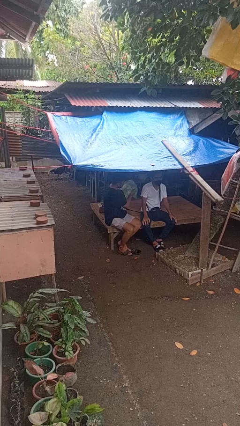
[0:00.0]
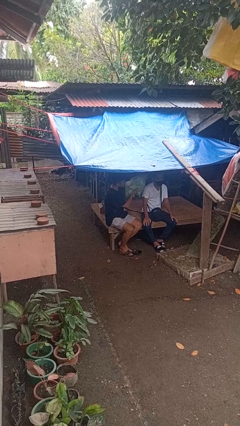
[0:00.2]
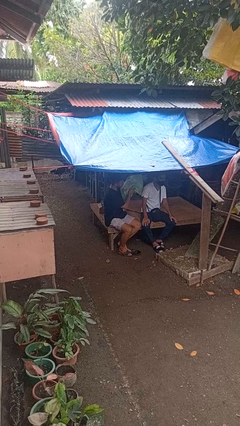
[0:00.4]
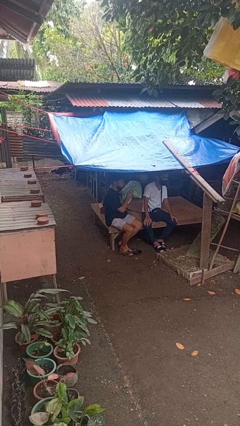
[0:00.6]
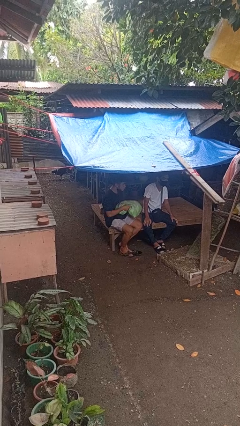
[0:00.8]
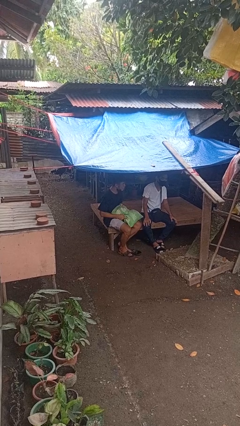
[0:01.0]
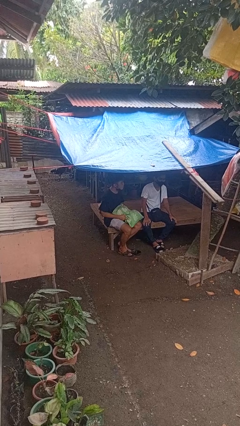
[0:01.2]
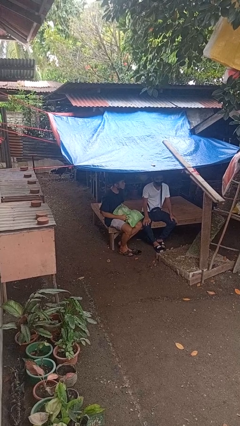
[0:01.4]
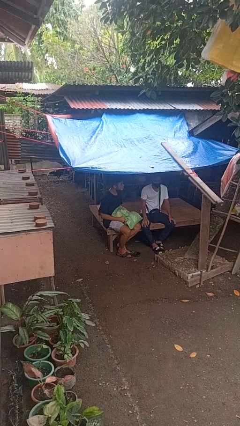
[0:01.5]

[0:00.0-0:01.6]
person hits person with pillow

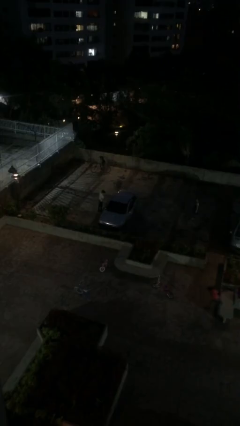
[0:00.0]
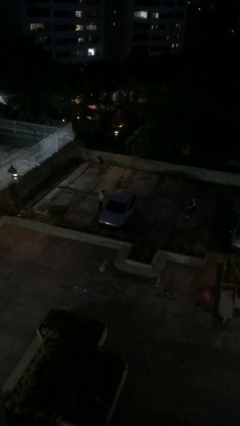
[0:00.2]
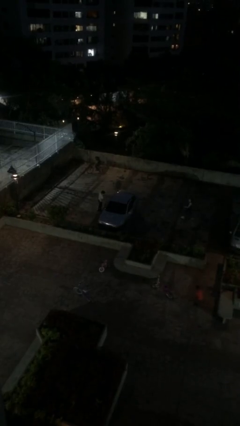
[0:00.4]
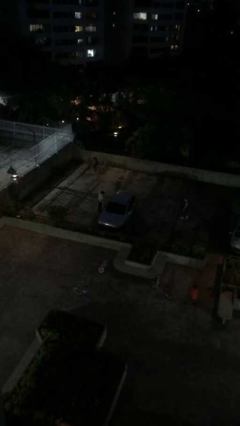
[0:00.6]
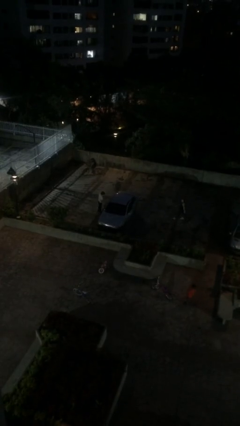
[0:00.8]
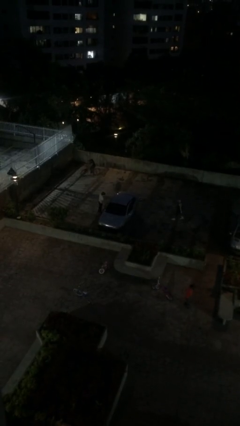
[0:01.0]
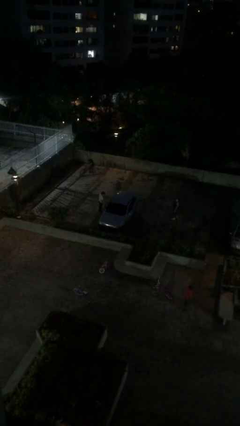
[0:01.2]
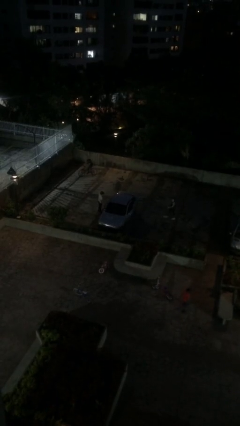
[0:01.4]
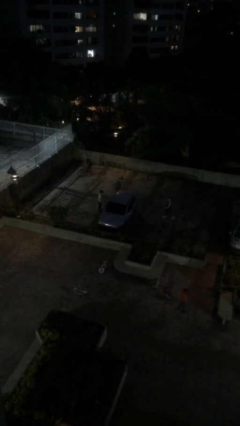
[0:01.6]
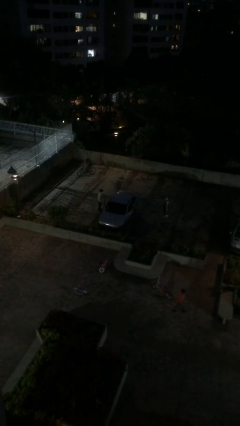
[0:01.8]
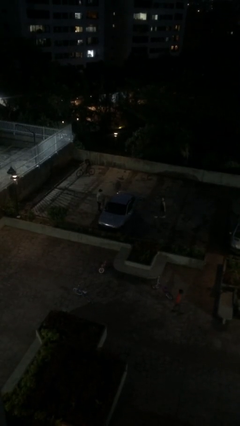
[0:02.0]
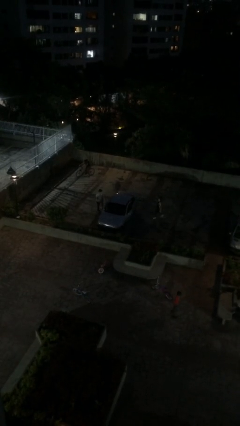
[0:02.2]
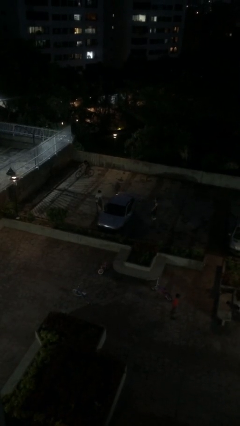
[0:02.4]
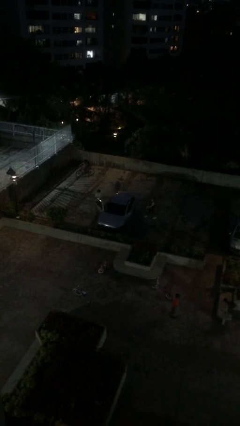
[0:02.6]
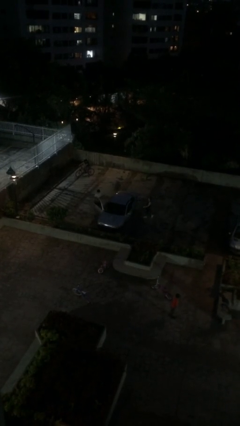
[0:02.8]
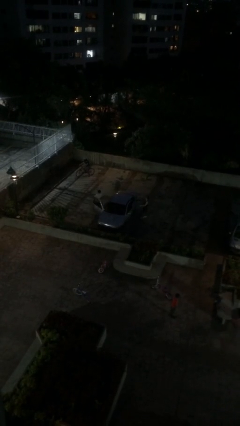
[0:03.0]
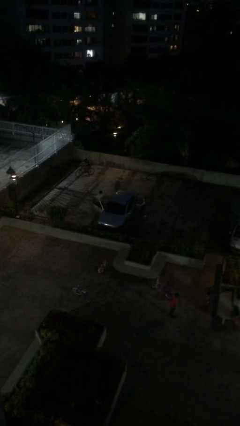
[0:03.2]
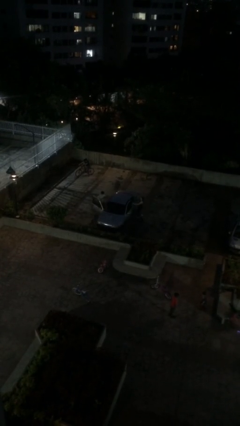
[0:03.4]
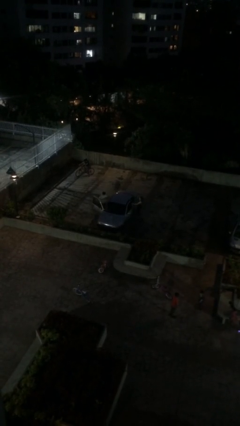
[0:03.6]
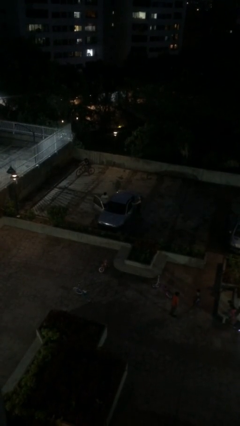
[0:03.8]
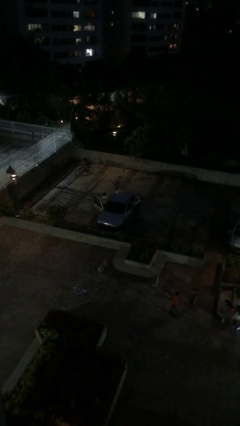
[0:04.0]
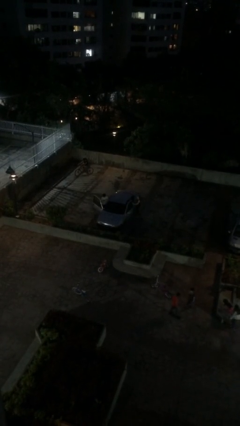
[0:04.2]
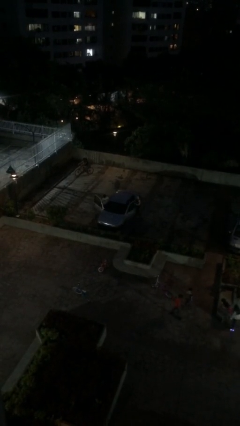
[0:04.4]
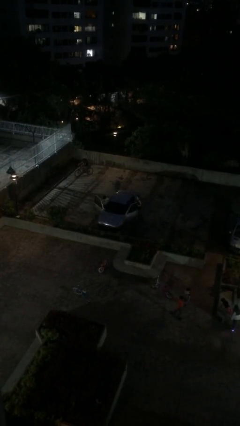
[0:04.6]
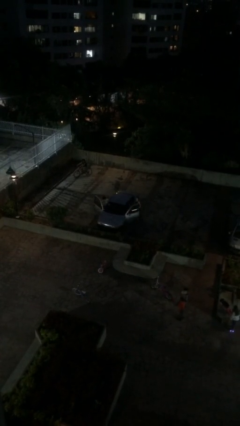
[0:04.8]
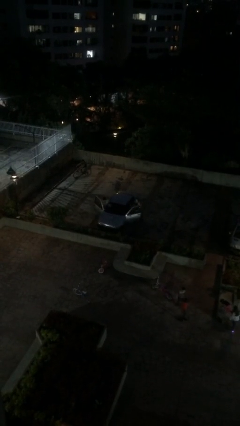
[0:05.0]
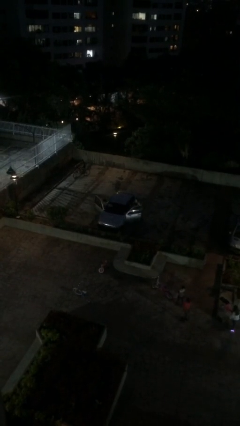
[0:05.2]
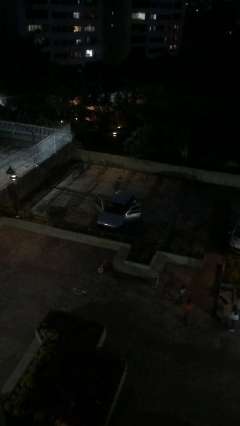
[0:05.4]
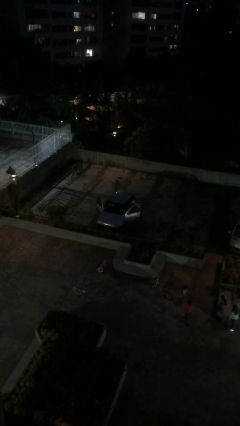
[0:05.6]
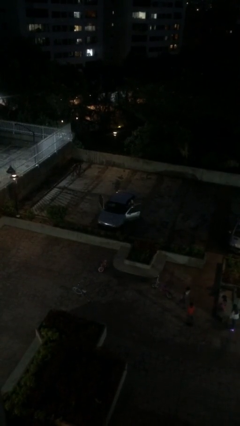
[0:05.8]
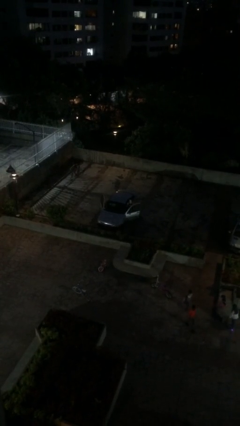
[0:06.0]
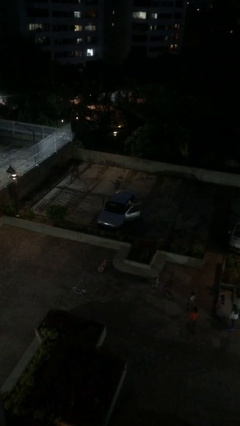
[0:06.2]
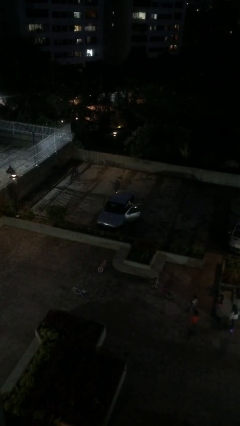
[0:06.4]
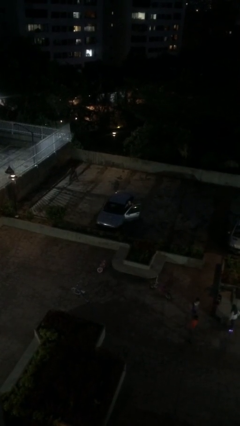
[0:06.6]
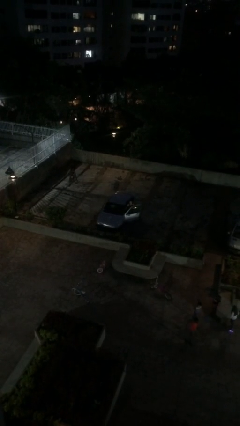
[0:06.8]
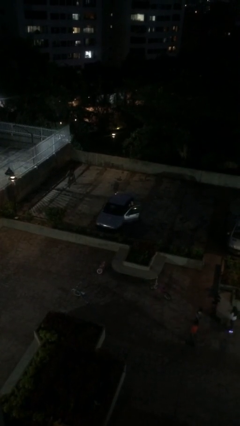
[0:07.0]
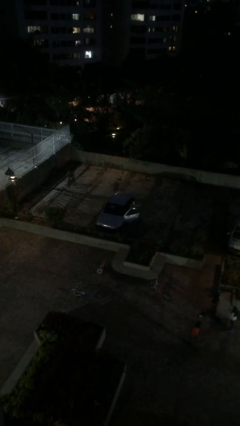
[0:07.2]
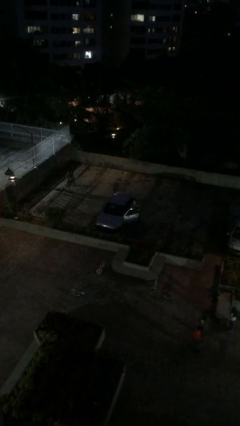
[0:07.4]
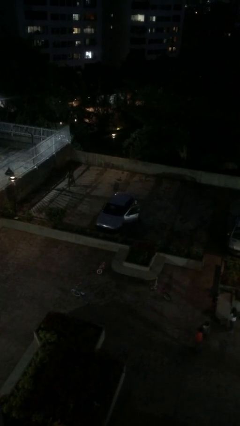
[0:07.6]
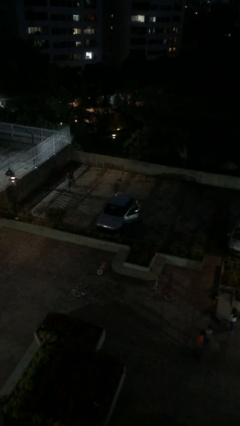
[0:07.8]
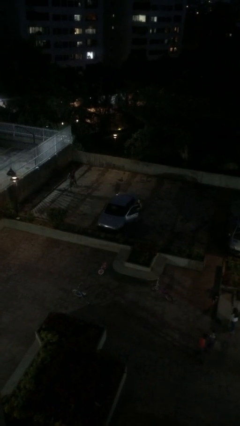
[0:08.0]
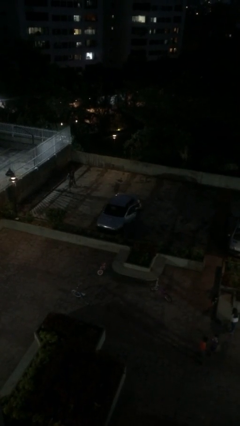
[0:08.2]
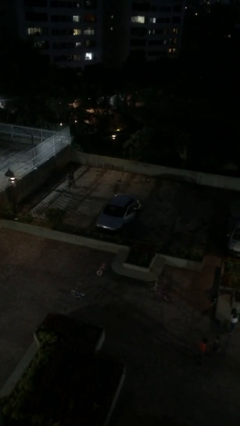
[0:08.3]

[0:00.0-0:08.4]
car picks up person

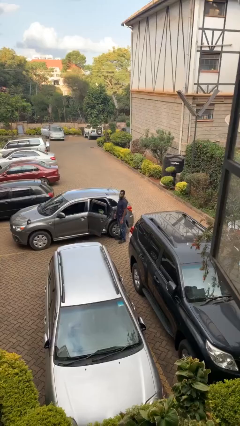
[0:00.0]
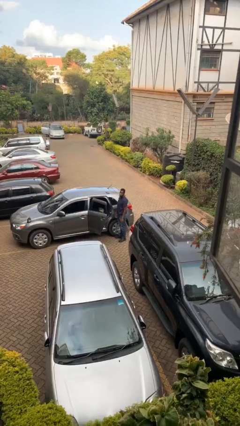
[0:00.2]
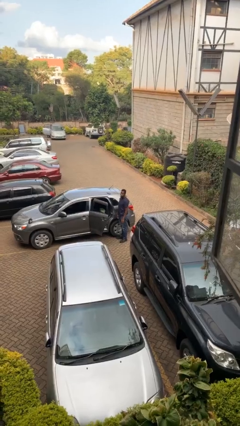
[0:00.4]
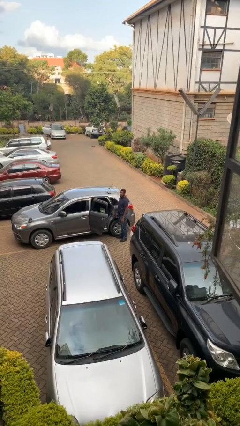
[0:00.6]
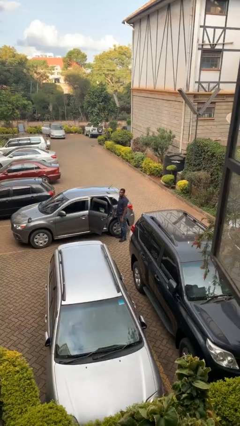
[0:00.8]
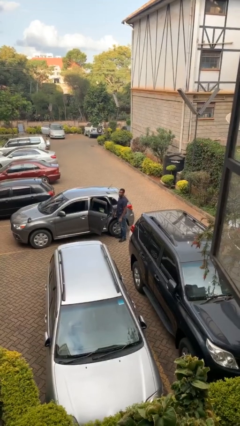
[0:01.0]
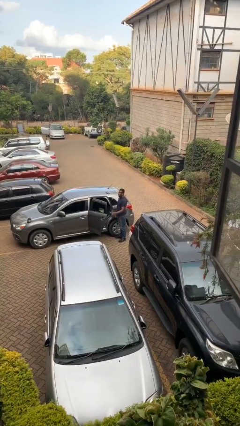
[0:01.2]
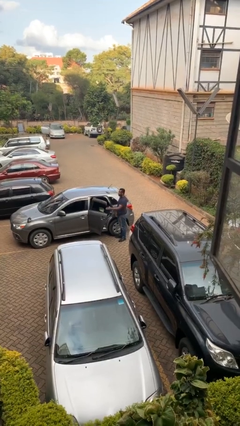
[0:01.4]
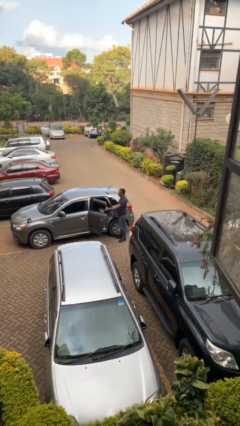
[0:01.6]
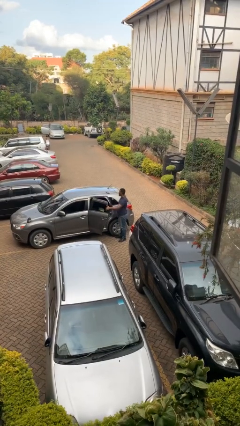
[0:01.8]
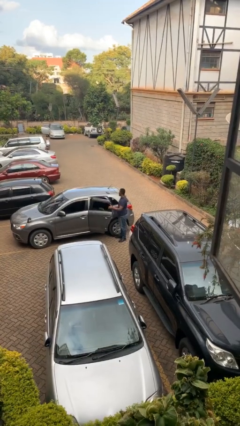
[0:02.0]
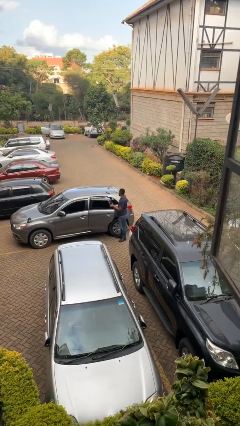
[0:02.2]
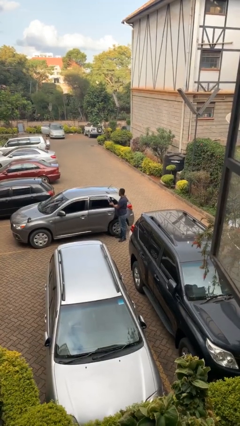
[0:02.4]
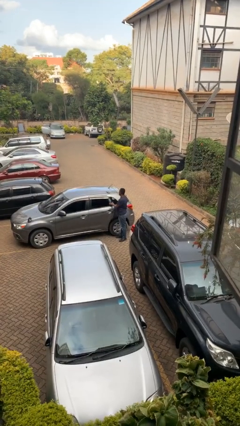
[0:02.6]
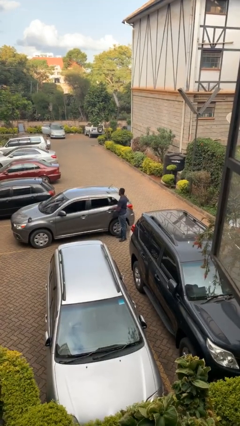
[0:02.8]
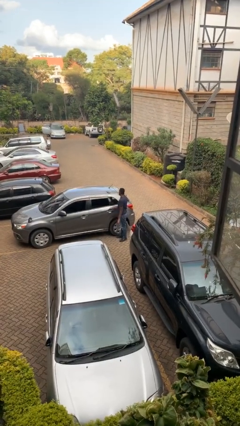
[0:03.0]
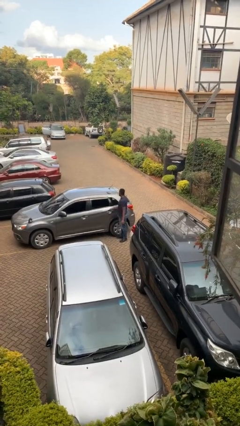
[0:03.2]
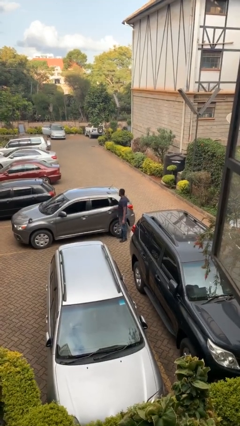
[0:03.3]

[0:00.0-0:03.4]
person closes car door

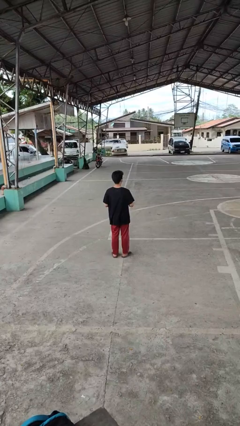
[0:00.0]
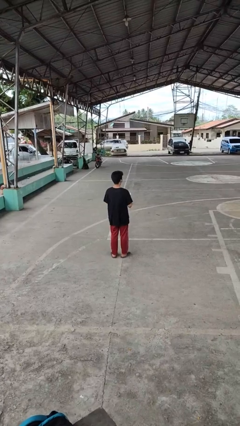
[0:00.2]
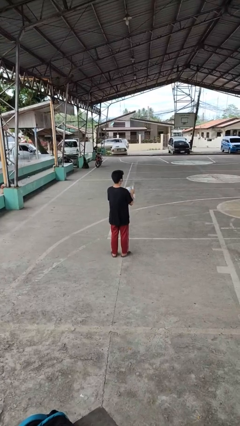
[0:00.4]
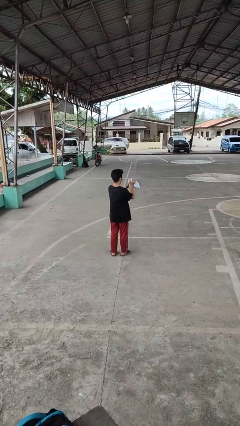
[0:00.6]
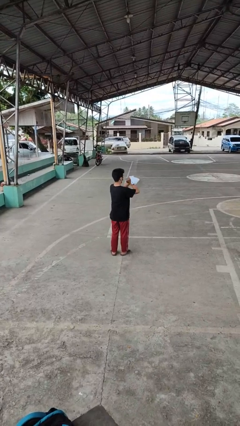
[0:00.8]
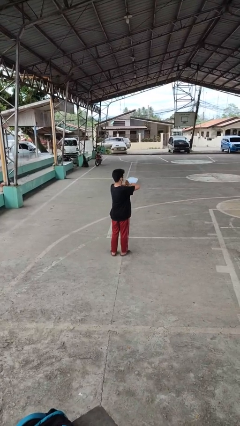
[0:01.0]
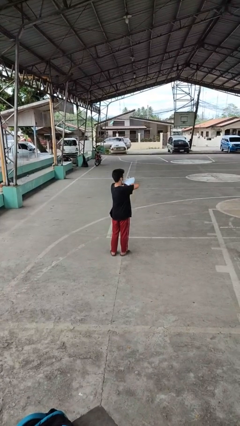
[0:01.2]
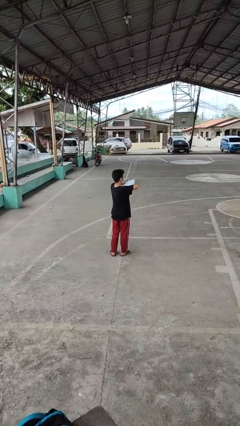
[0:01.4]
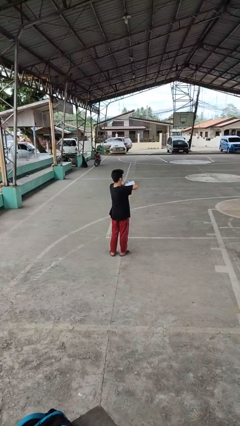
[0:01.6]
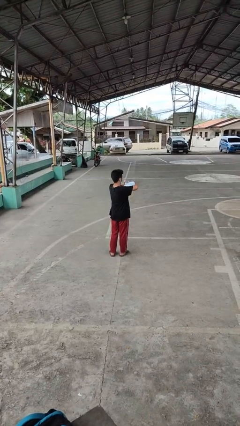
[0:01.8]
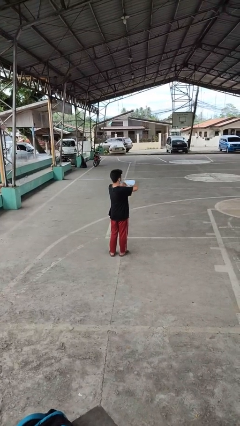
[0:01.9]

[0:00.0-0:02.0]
person squeezes object

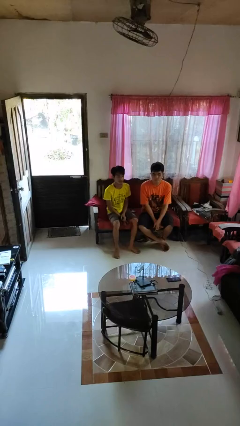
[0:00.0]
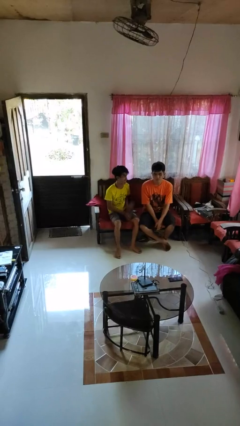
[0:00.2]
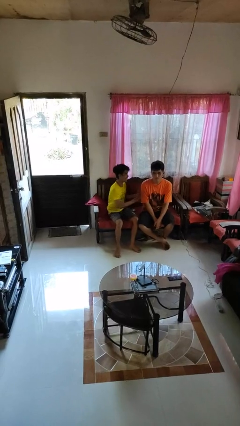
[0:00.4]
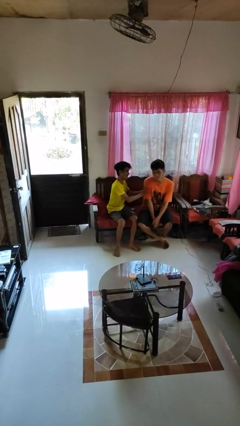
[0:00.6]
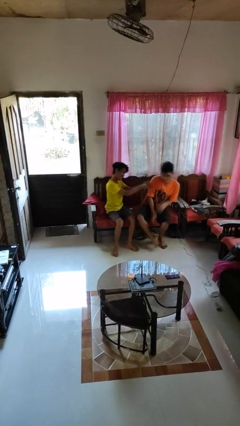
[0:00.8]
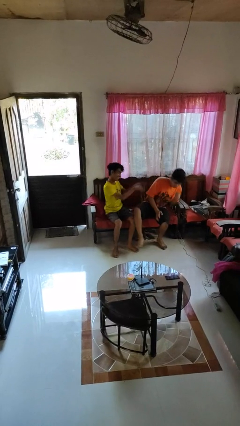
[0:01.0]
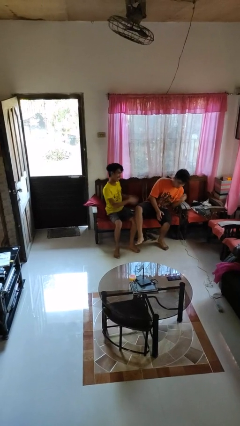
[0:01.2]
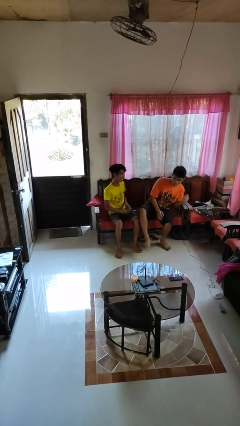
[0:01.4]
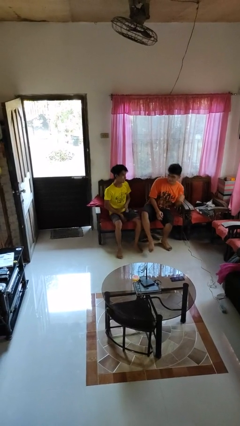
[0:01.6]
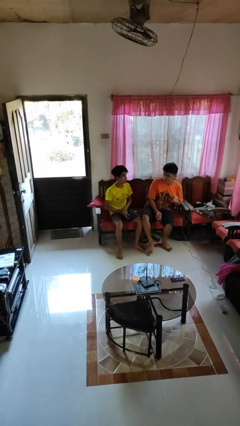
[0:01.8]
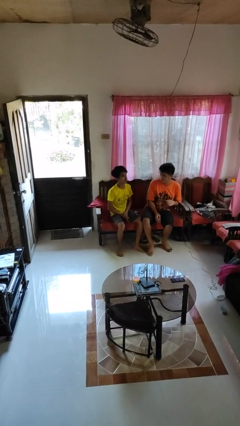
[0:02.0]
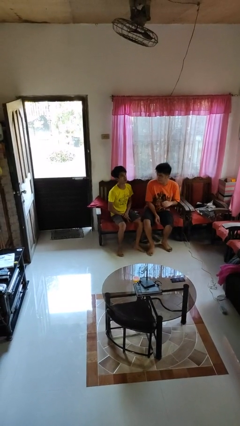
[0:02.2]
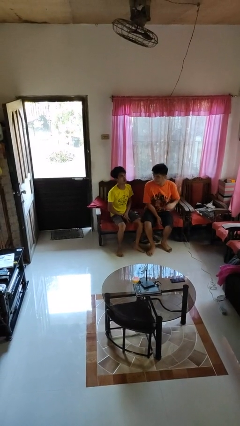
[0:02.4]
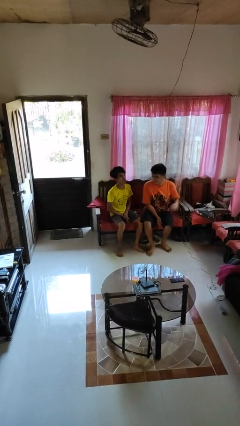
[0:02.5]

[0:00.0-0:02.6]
person shoves person
